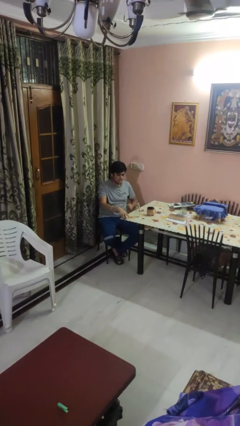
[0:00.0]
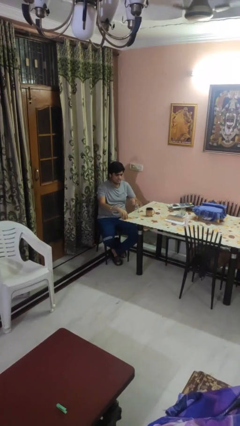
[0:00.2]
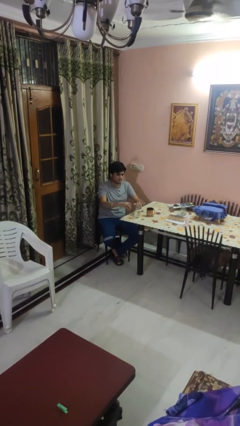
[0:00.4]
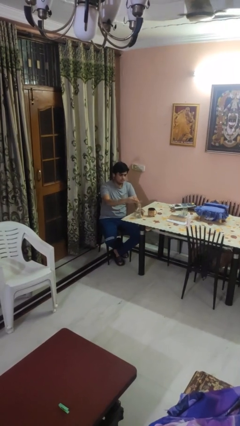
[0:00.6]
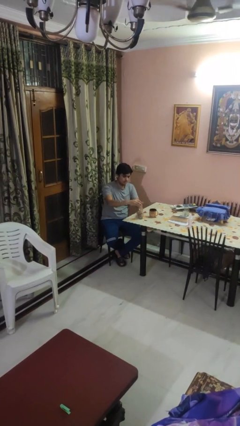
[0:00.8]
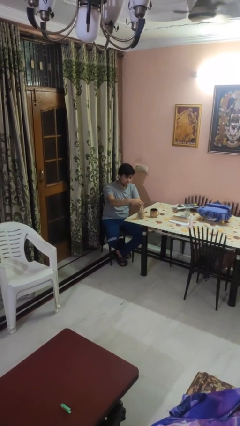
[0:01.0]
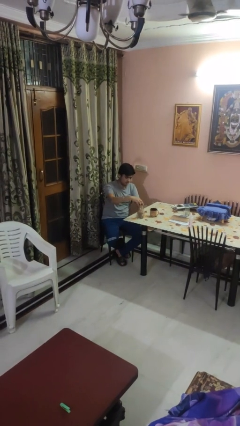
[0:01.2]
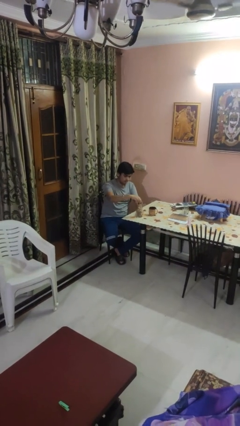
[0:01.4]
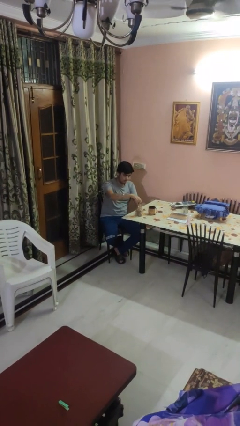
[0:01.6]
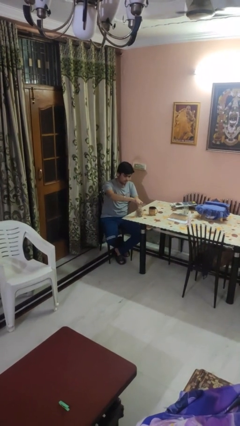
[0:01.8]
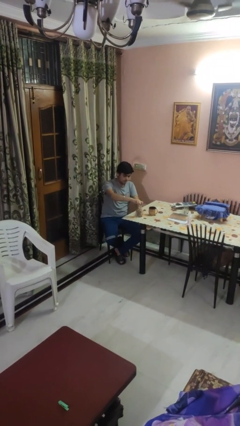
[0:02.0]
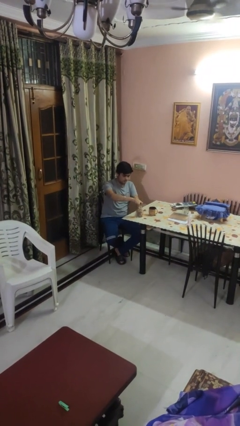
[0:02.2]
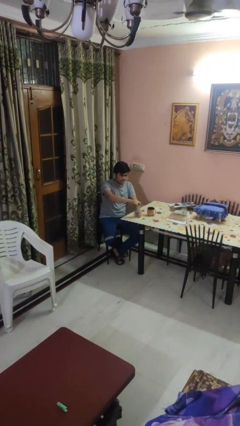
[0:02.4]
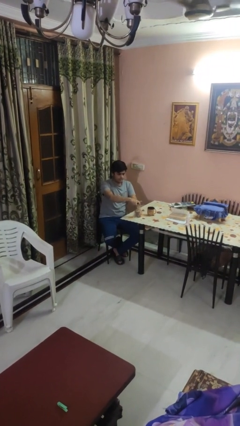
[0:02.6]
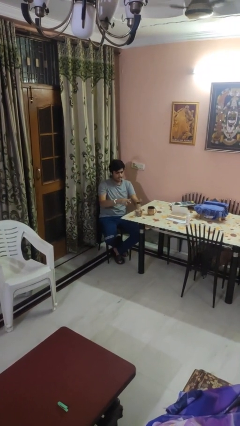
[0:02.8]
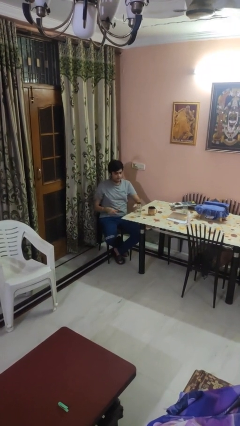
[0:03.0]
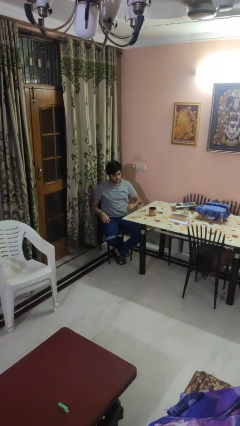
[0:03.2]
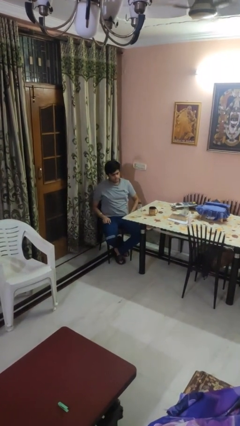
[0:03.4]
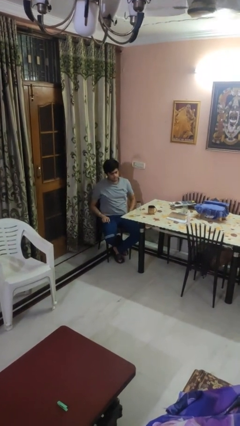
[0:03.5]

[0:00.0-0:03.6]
person screws lid to bottle

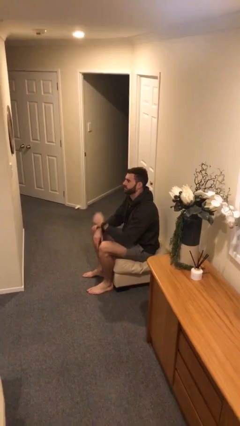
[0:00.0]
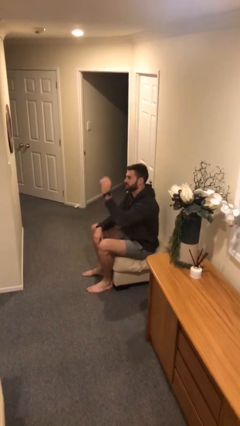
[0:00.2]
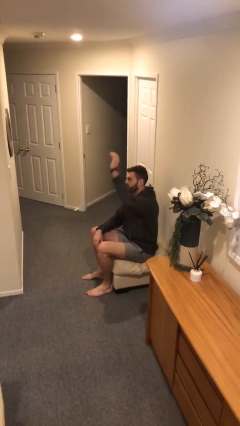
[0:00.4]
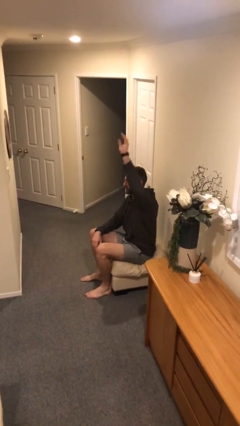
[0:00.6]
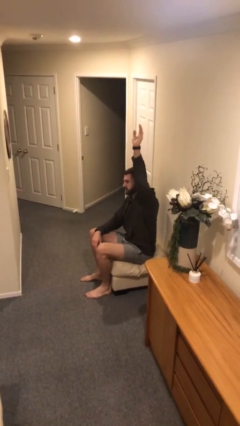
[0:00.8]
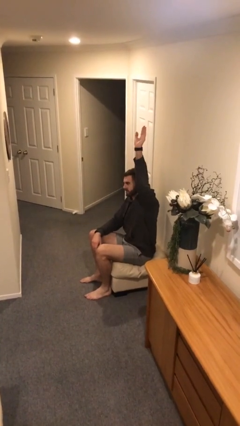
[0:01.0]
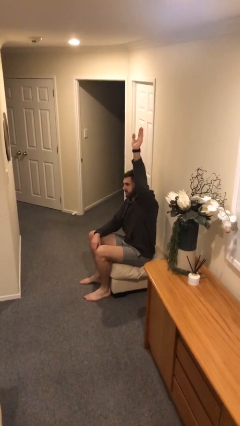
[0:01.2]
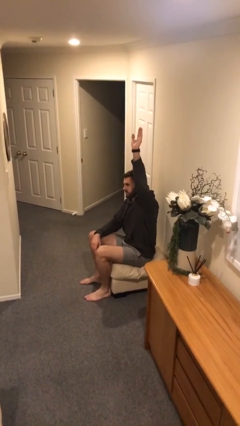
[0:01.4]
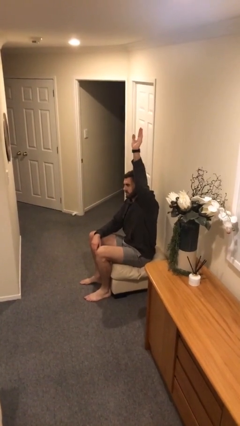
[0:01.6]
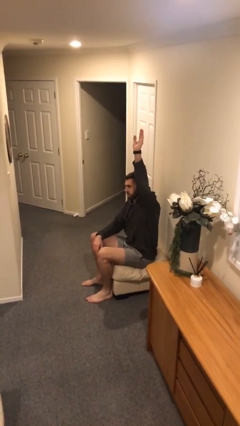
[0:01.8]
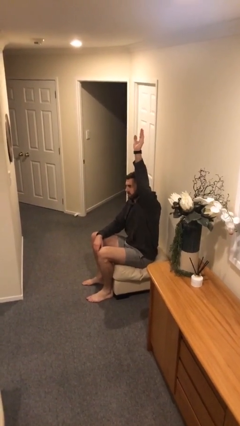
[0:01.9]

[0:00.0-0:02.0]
person gestures raise hand

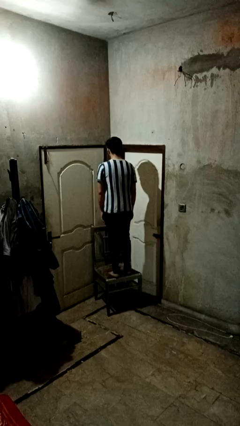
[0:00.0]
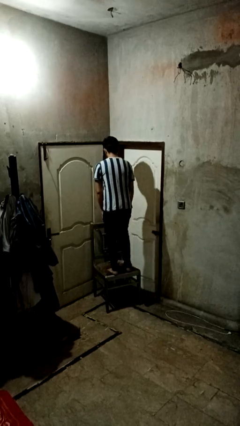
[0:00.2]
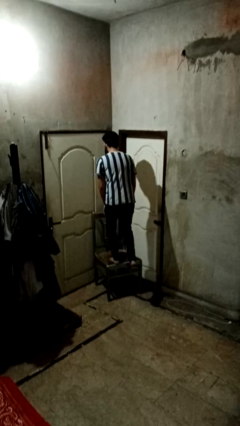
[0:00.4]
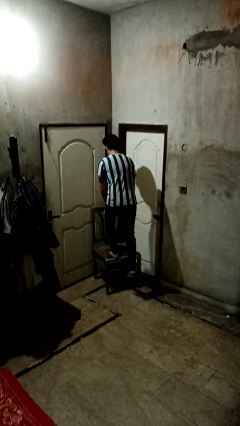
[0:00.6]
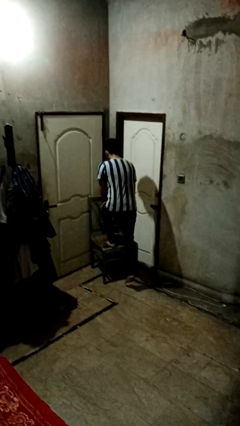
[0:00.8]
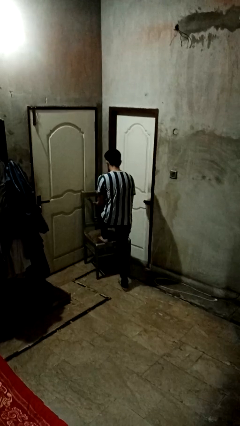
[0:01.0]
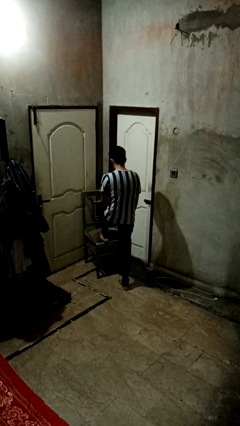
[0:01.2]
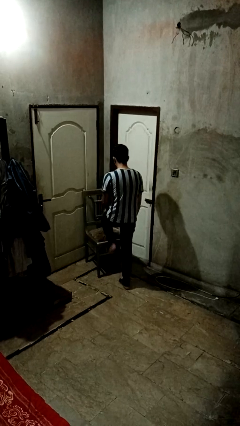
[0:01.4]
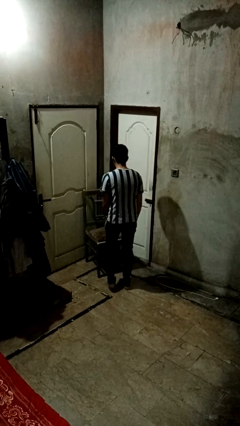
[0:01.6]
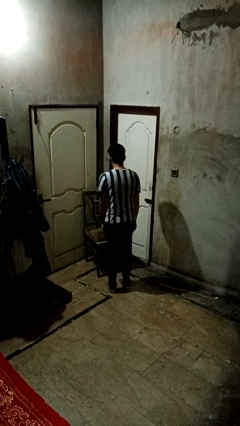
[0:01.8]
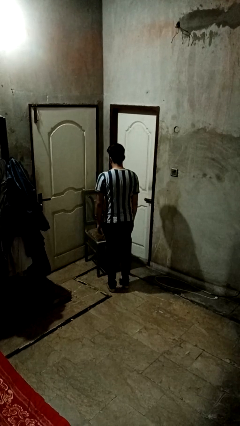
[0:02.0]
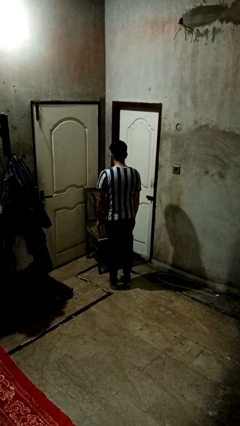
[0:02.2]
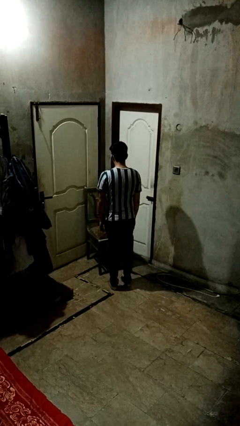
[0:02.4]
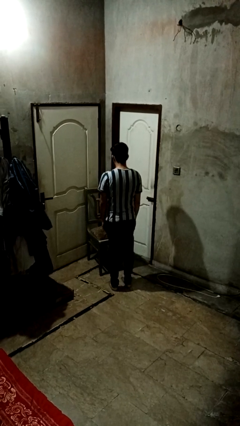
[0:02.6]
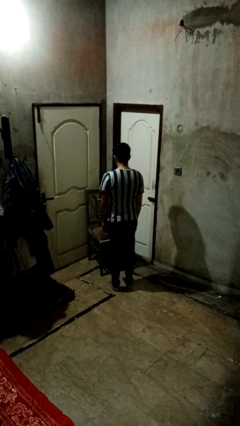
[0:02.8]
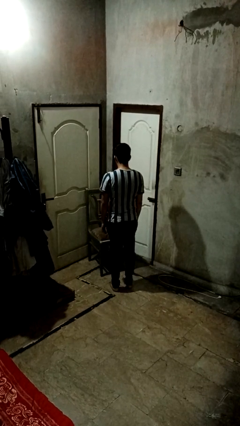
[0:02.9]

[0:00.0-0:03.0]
person climbs off chair

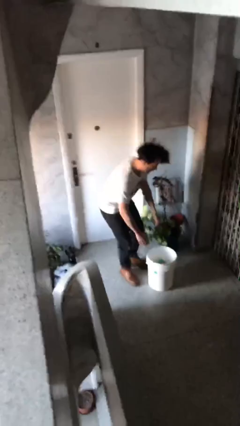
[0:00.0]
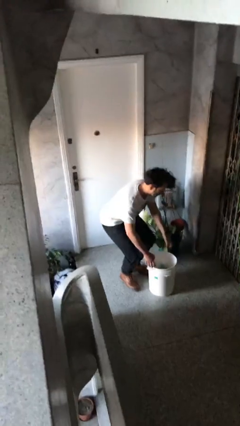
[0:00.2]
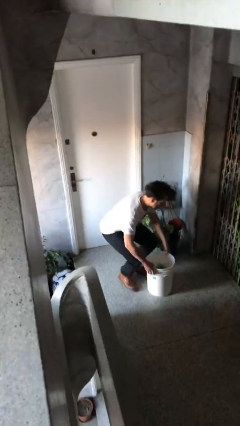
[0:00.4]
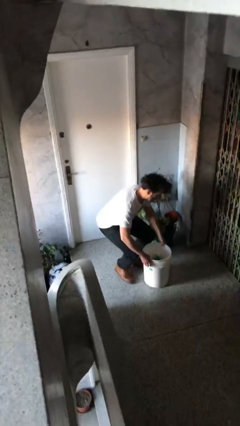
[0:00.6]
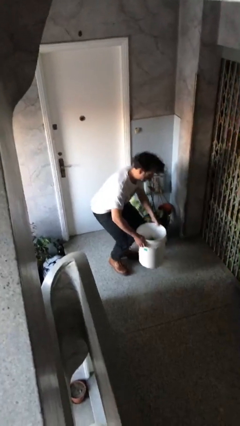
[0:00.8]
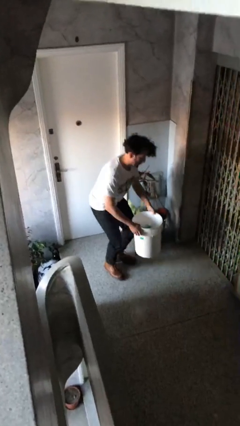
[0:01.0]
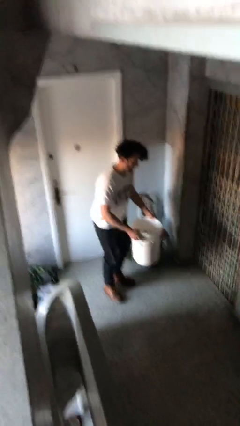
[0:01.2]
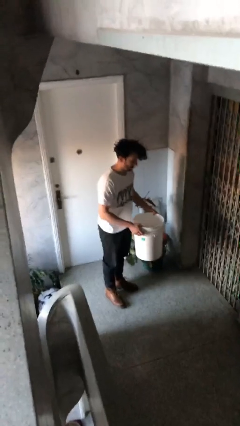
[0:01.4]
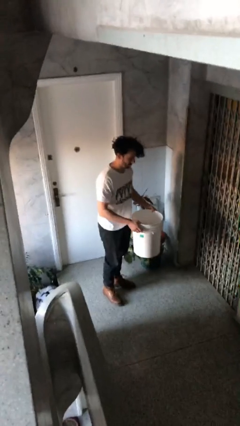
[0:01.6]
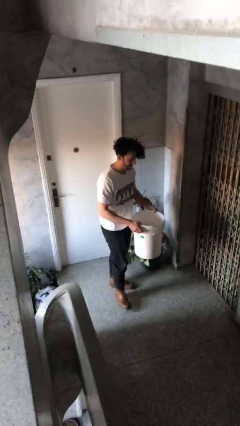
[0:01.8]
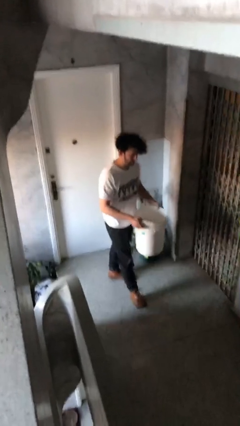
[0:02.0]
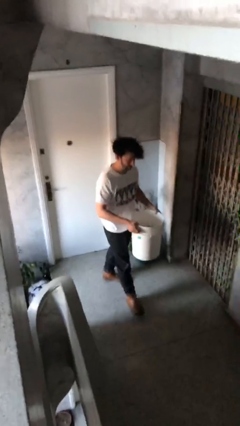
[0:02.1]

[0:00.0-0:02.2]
person picks up object from floor

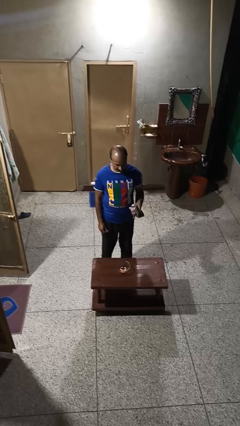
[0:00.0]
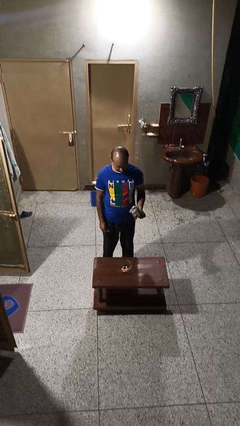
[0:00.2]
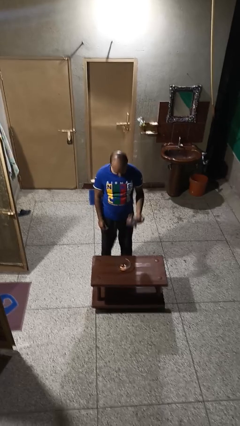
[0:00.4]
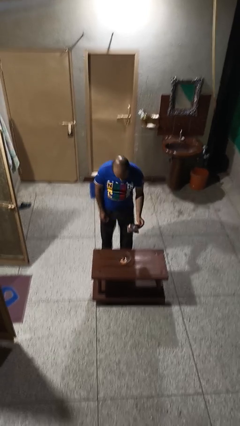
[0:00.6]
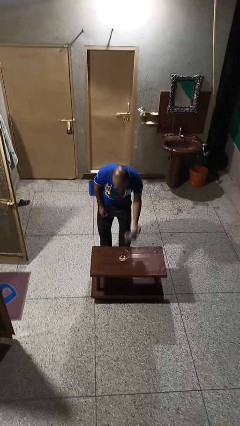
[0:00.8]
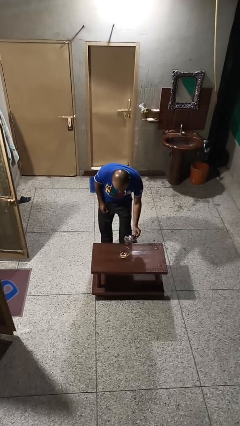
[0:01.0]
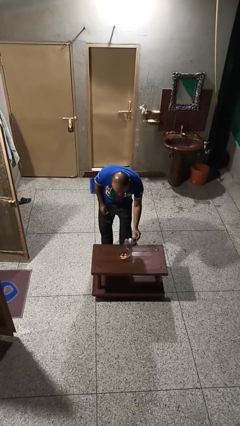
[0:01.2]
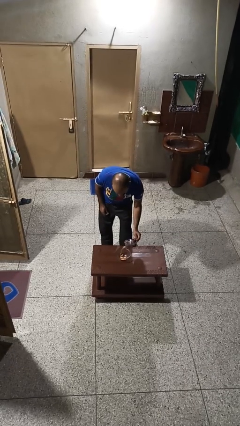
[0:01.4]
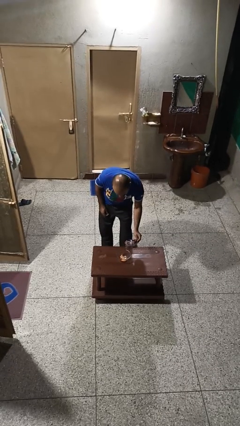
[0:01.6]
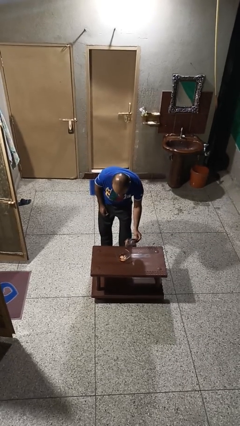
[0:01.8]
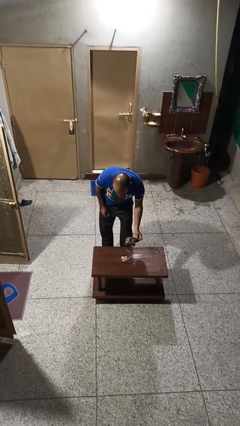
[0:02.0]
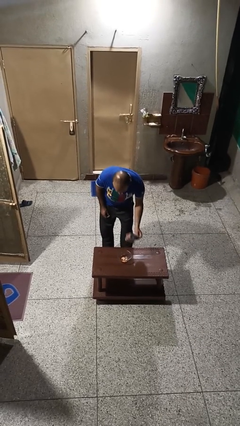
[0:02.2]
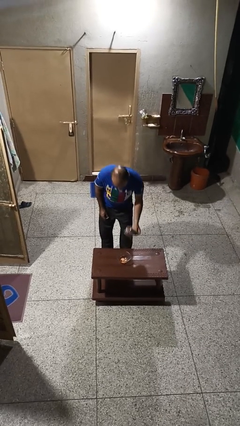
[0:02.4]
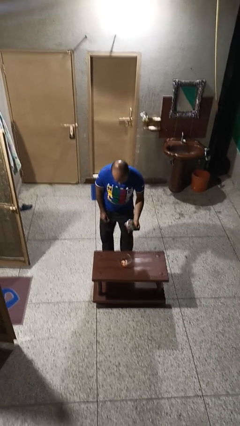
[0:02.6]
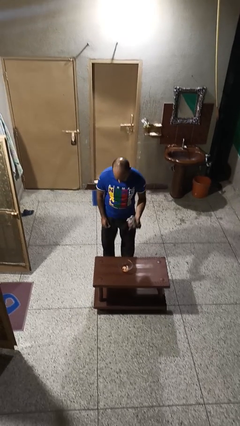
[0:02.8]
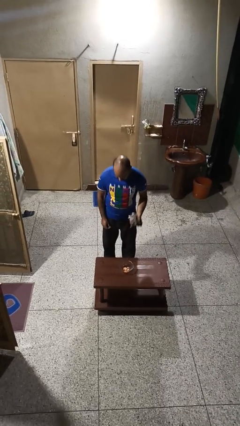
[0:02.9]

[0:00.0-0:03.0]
person pours into bowl

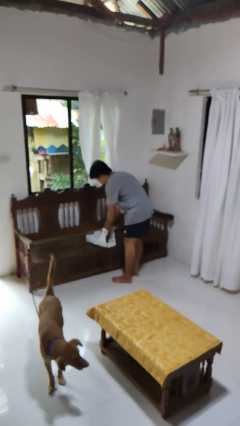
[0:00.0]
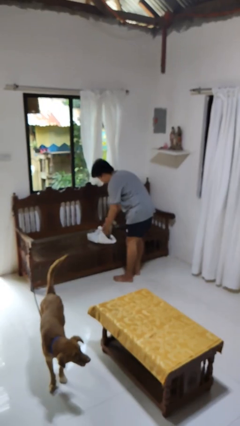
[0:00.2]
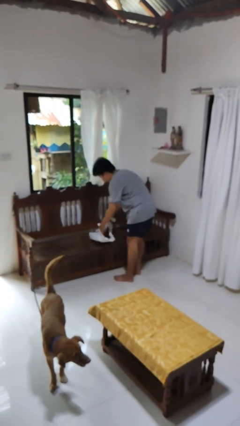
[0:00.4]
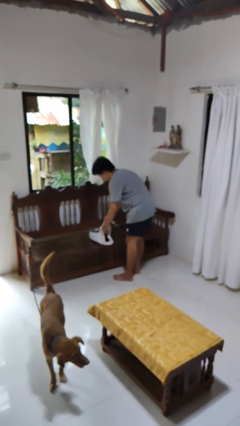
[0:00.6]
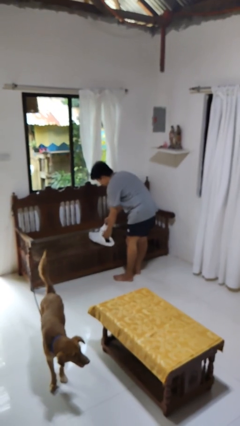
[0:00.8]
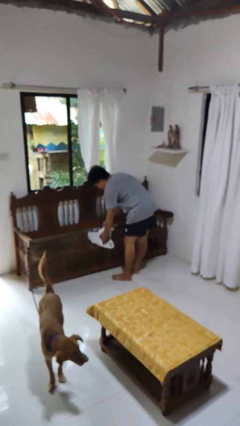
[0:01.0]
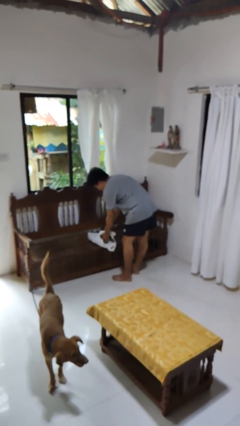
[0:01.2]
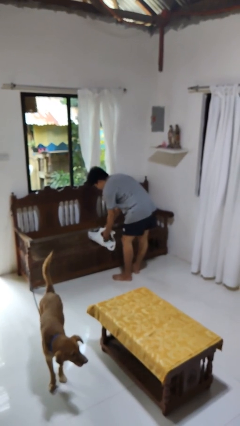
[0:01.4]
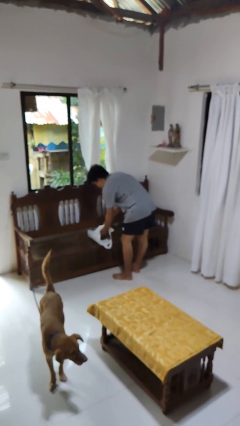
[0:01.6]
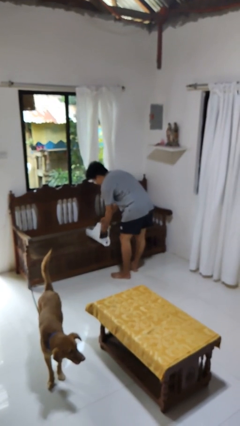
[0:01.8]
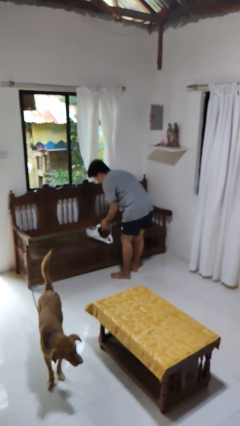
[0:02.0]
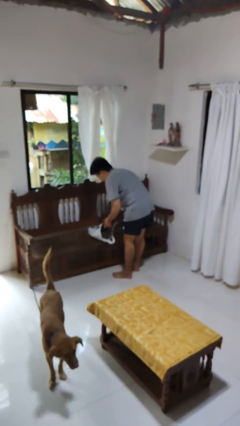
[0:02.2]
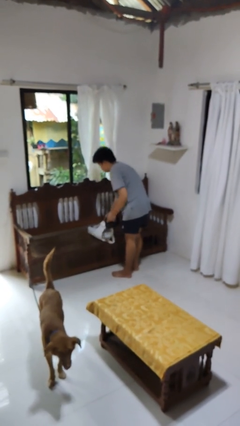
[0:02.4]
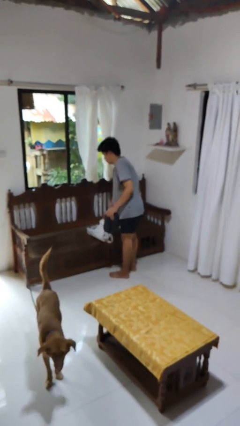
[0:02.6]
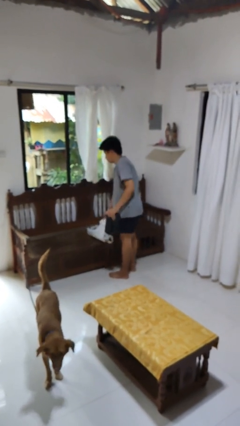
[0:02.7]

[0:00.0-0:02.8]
person takes object from bag

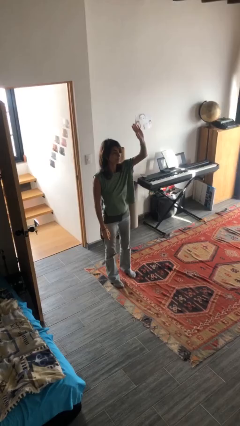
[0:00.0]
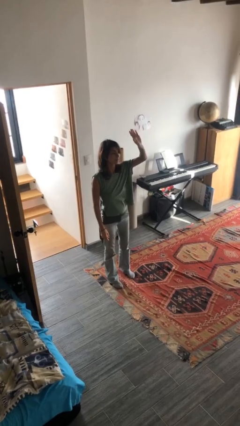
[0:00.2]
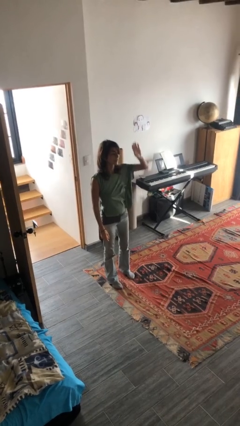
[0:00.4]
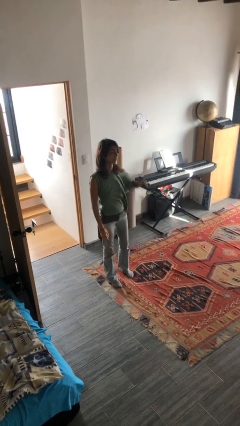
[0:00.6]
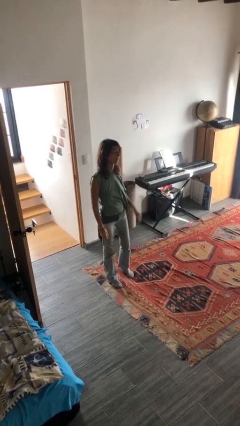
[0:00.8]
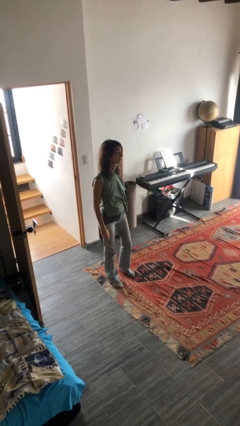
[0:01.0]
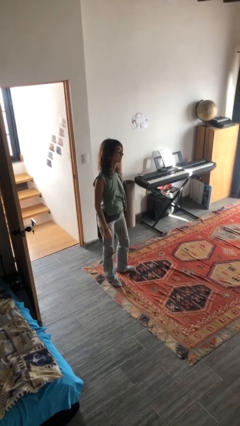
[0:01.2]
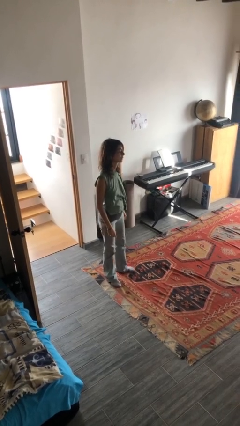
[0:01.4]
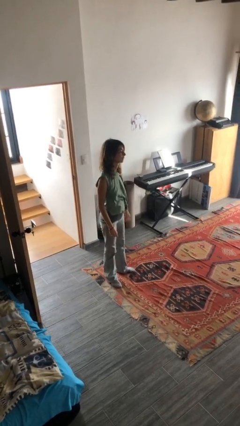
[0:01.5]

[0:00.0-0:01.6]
person gestures lower hand
